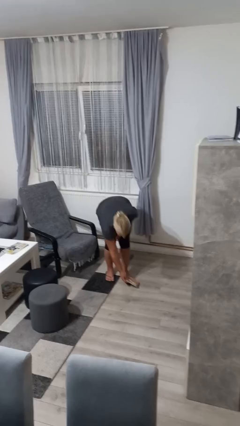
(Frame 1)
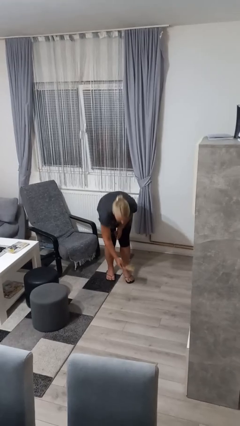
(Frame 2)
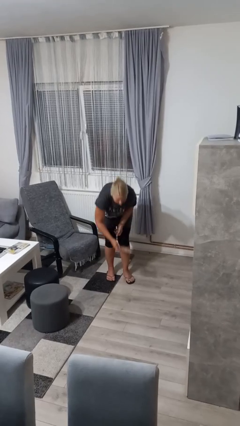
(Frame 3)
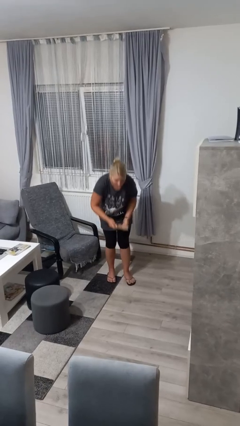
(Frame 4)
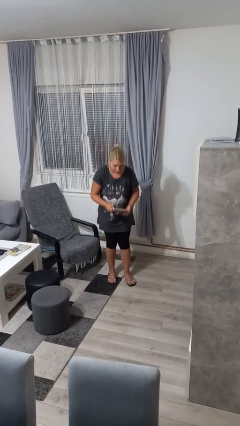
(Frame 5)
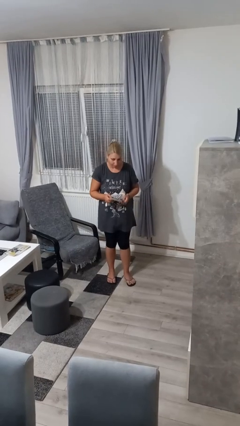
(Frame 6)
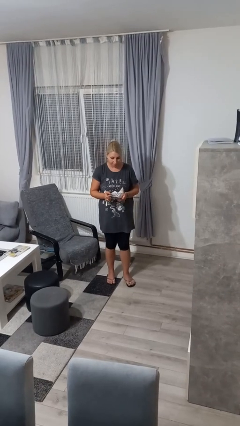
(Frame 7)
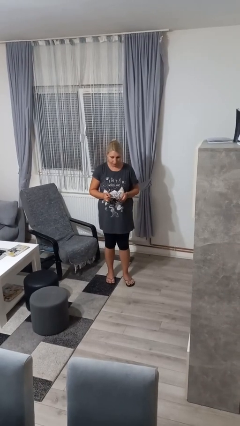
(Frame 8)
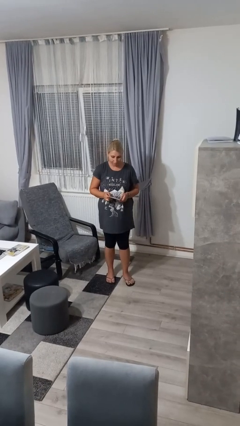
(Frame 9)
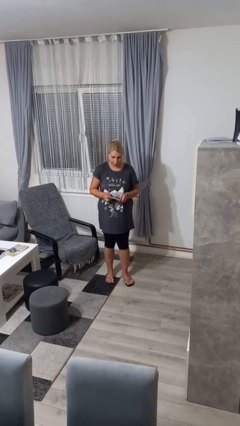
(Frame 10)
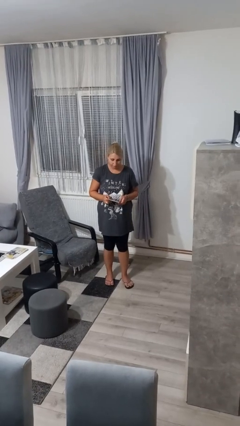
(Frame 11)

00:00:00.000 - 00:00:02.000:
person picks up object from floor

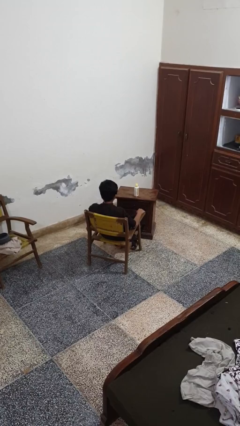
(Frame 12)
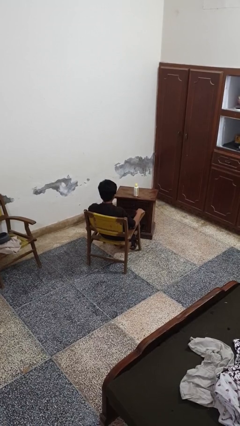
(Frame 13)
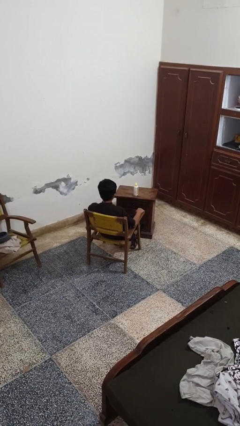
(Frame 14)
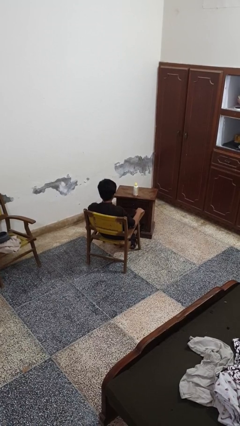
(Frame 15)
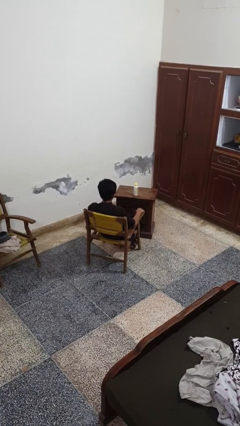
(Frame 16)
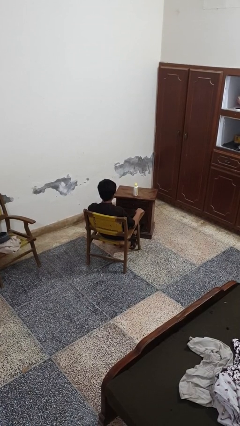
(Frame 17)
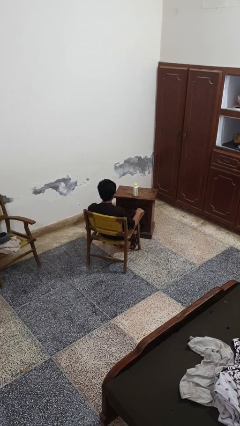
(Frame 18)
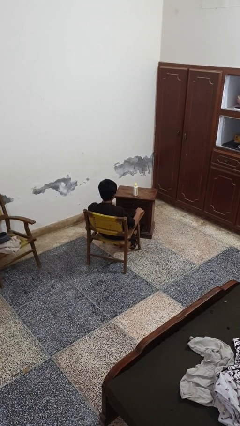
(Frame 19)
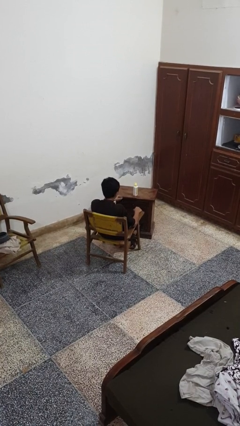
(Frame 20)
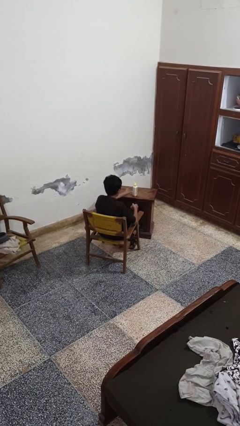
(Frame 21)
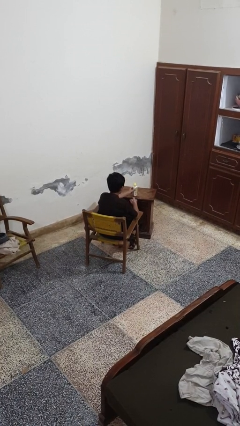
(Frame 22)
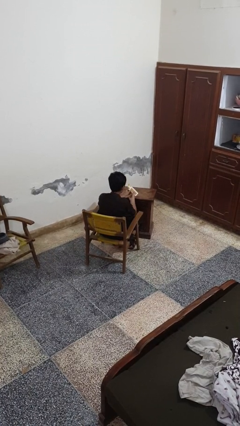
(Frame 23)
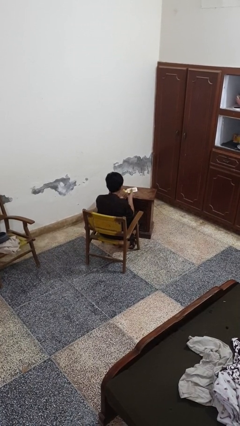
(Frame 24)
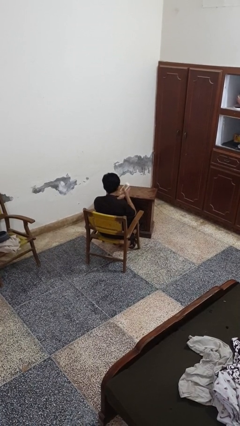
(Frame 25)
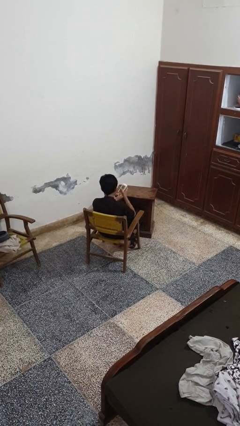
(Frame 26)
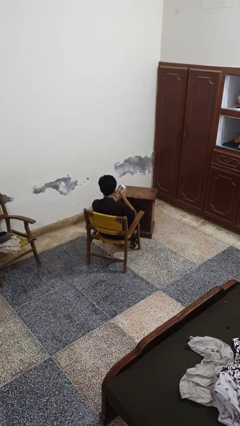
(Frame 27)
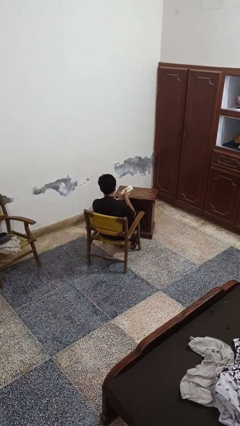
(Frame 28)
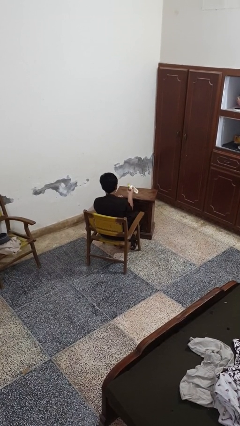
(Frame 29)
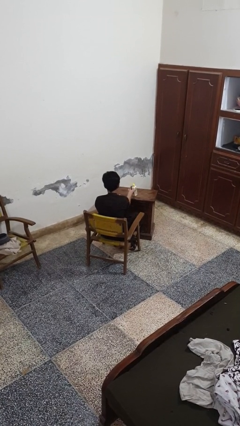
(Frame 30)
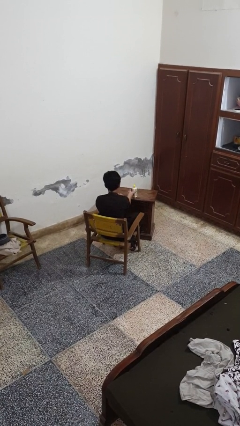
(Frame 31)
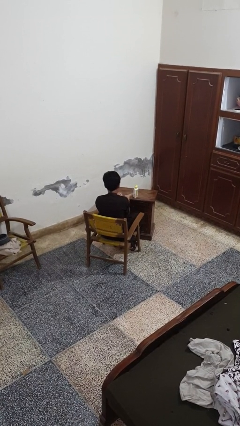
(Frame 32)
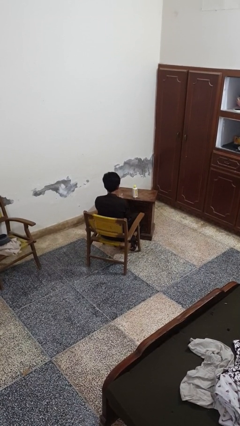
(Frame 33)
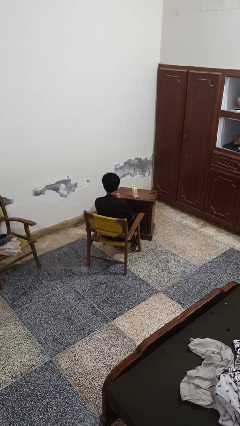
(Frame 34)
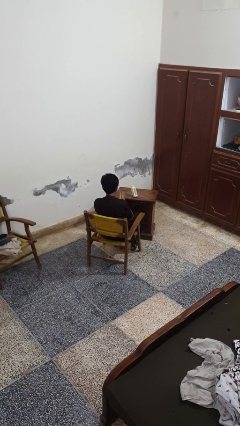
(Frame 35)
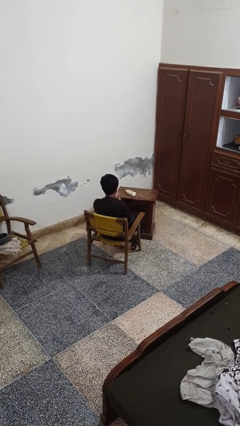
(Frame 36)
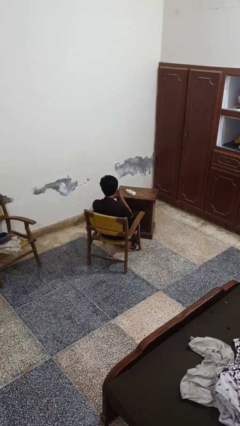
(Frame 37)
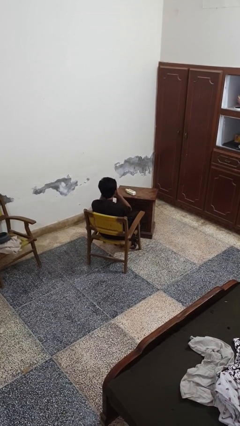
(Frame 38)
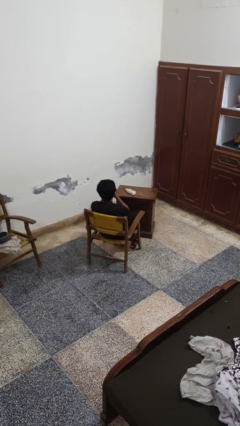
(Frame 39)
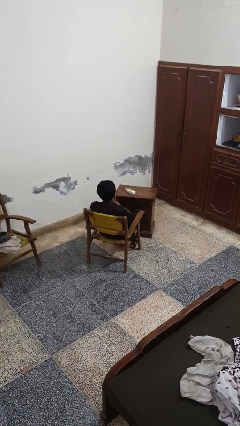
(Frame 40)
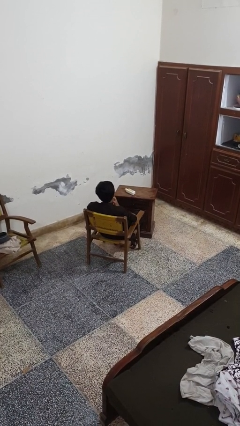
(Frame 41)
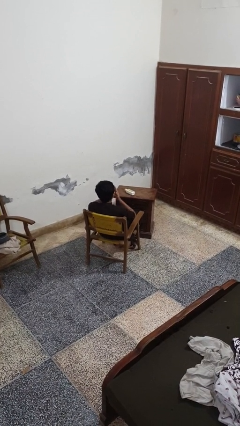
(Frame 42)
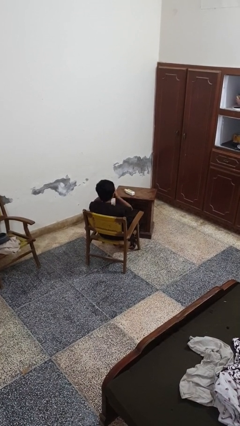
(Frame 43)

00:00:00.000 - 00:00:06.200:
person applies sunscreen

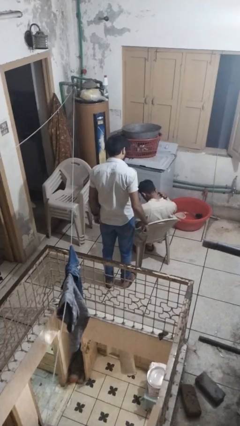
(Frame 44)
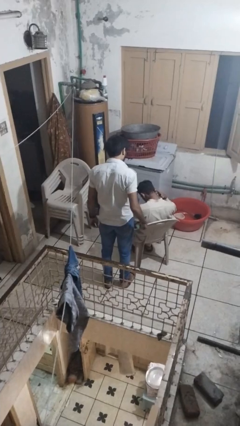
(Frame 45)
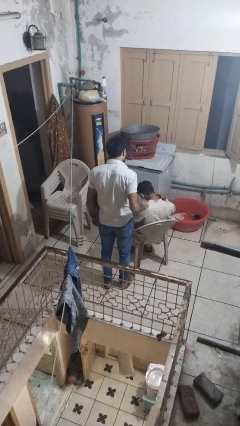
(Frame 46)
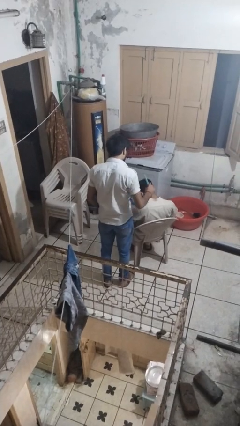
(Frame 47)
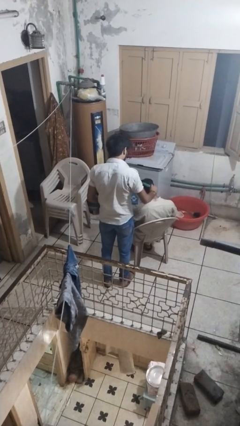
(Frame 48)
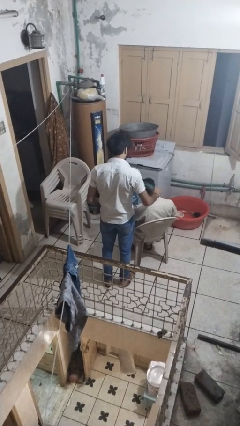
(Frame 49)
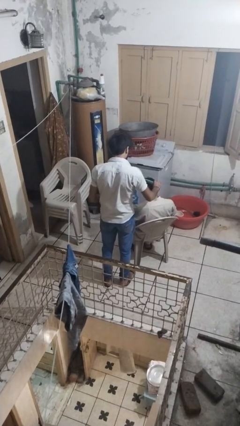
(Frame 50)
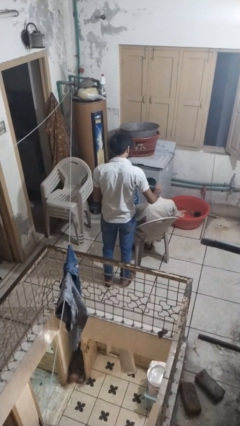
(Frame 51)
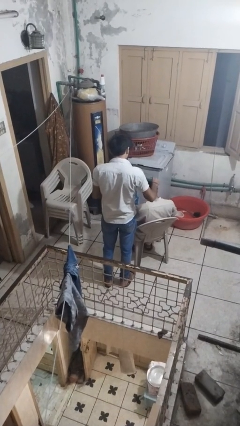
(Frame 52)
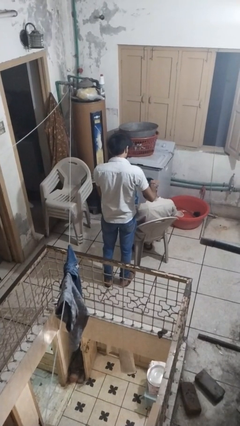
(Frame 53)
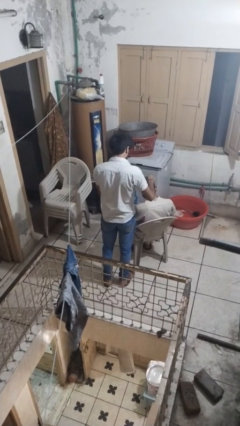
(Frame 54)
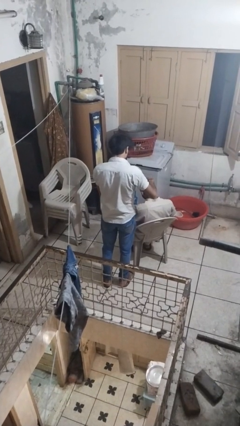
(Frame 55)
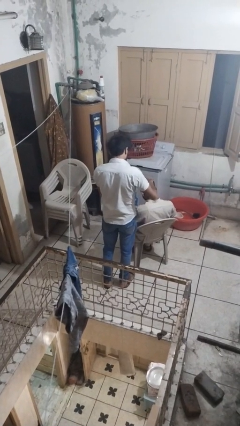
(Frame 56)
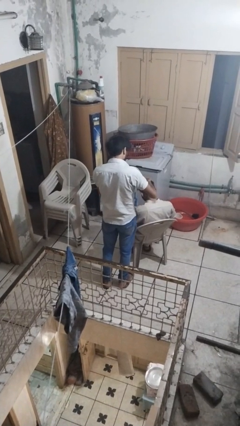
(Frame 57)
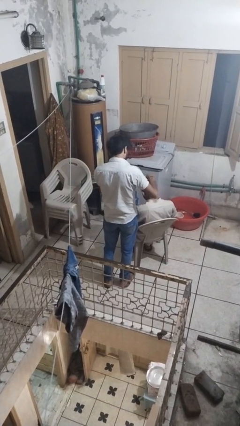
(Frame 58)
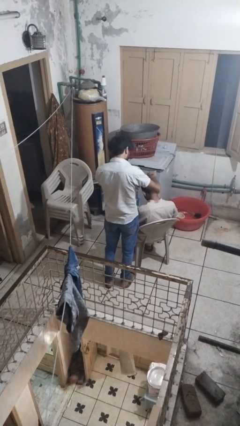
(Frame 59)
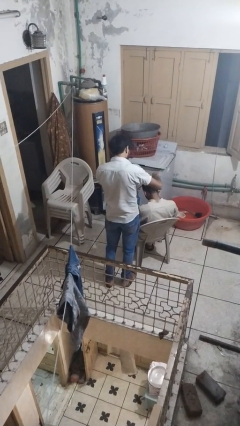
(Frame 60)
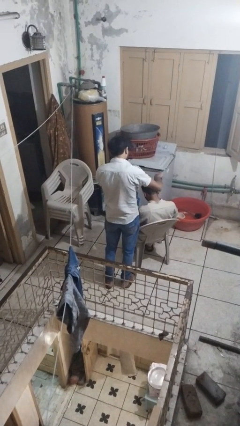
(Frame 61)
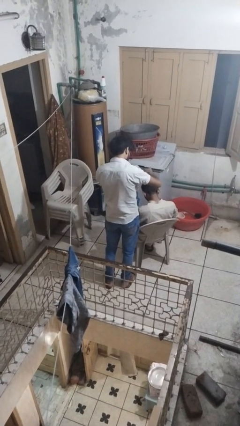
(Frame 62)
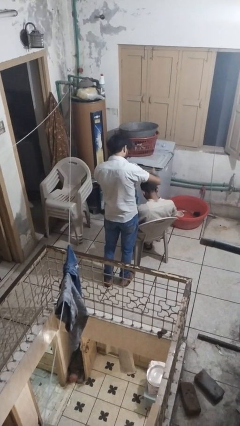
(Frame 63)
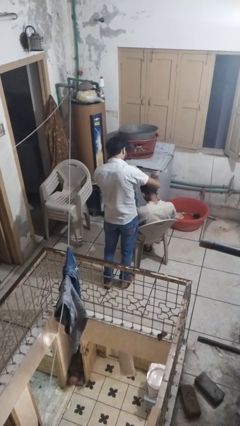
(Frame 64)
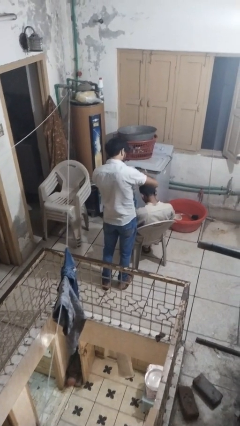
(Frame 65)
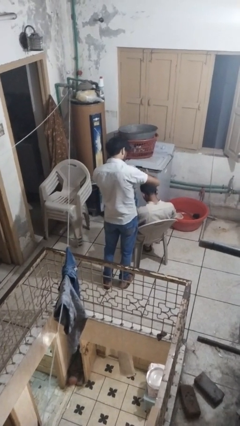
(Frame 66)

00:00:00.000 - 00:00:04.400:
person brushes hair of person

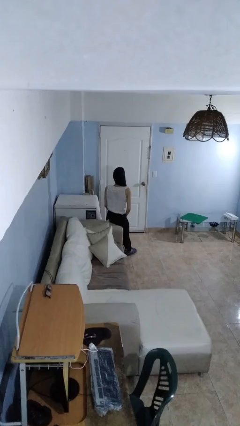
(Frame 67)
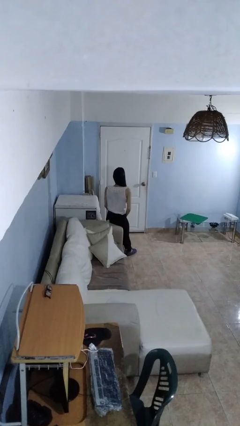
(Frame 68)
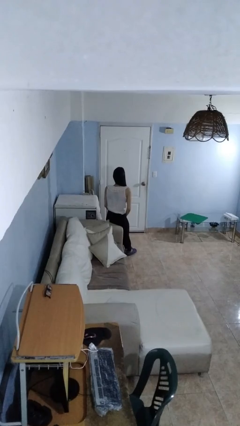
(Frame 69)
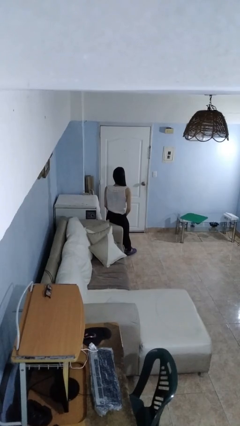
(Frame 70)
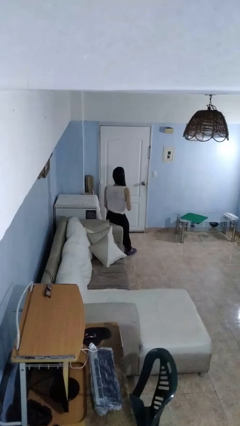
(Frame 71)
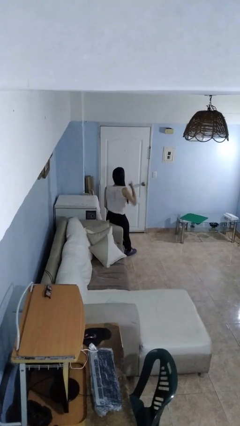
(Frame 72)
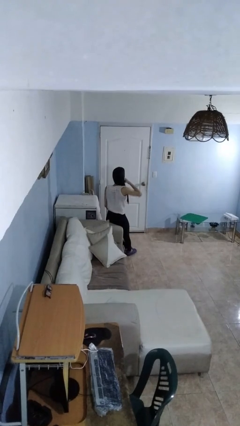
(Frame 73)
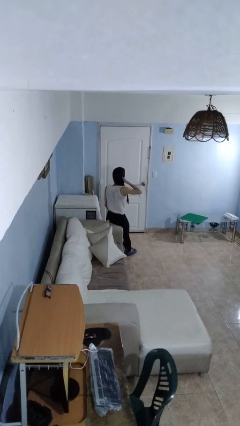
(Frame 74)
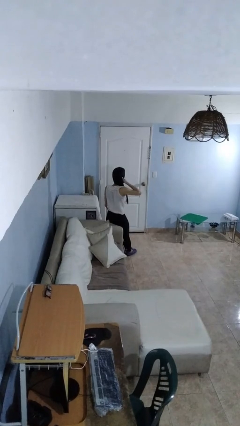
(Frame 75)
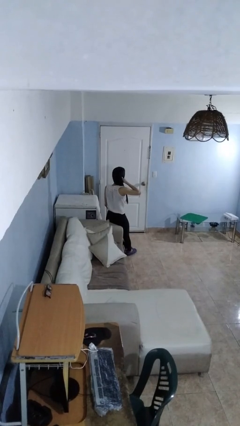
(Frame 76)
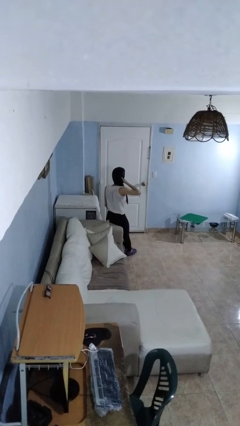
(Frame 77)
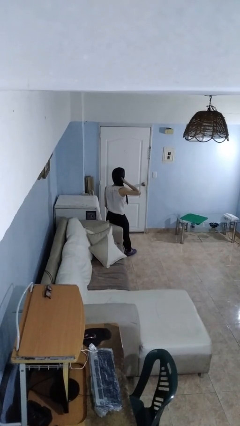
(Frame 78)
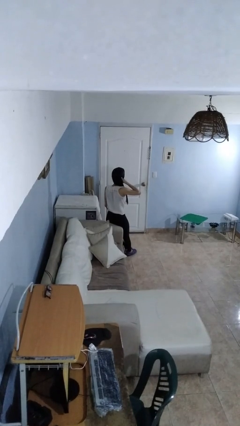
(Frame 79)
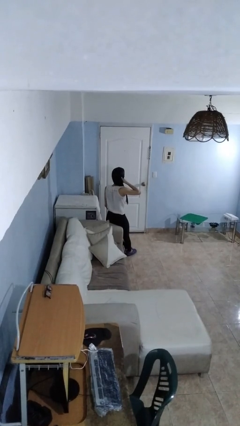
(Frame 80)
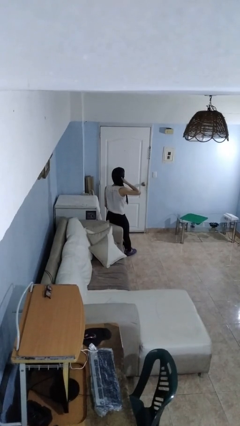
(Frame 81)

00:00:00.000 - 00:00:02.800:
person gestures call me

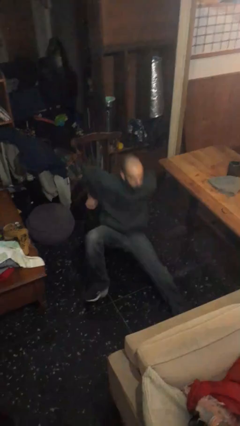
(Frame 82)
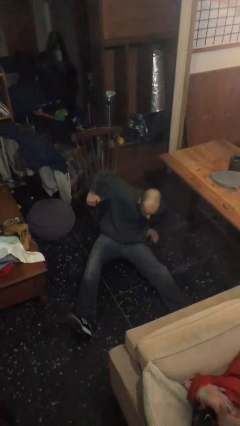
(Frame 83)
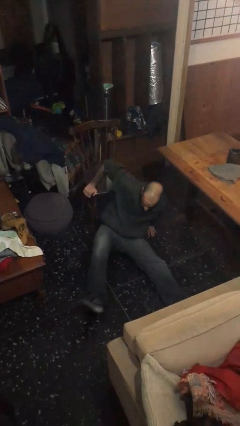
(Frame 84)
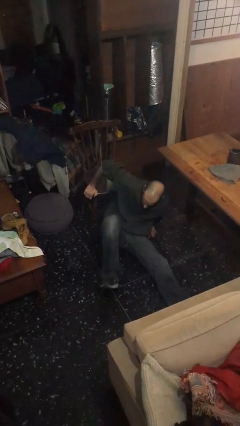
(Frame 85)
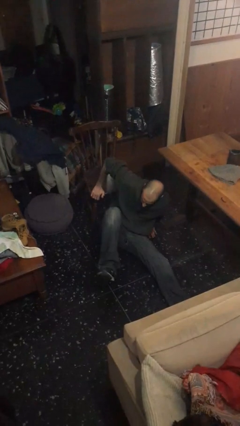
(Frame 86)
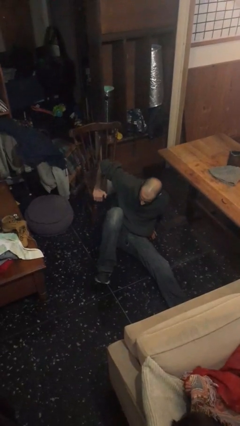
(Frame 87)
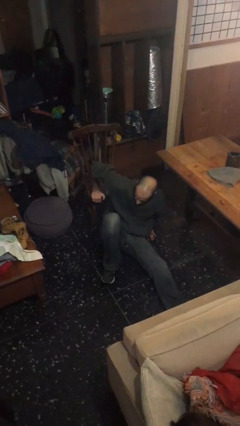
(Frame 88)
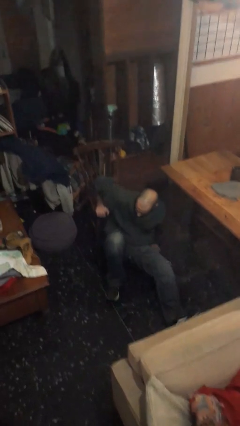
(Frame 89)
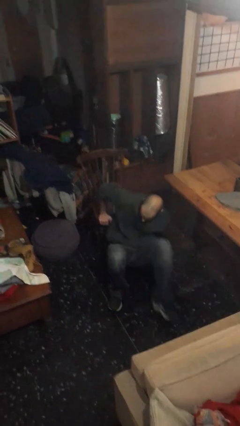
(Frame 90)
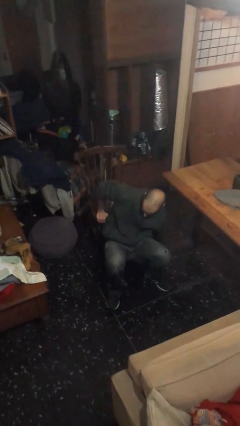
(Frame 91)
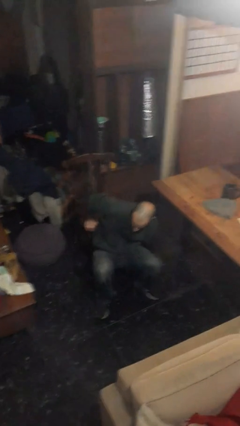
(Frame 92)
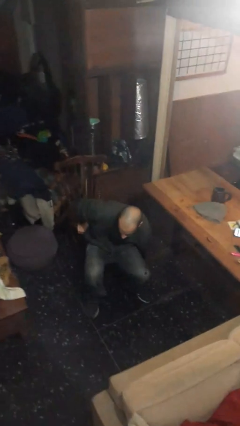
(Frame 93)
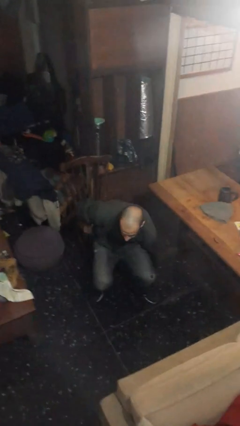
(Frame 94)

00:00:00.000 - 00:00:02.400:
person falls from chair

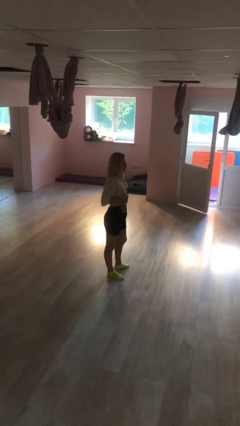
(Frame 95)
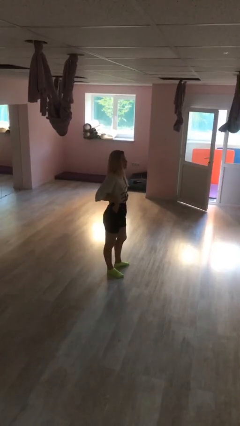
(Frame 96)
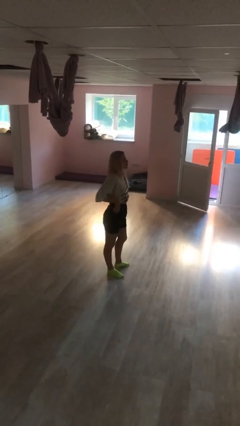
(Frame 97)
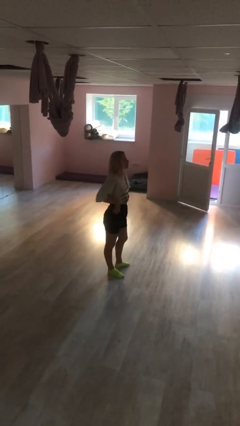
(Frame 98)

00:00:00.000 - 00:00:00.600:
person puts phone into pocket
